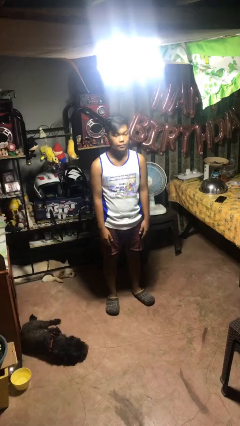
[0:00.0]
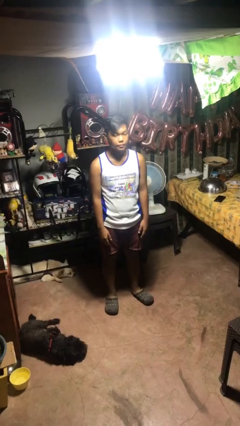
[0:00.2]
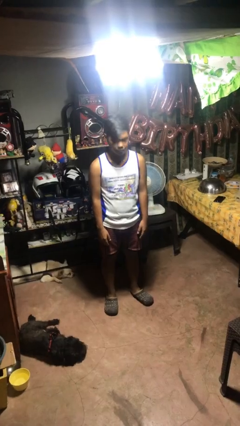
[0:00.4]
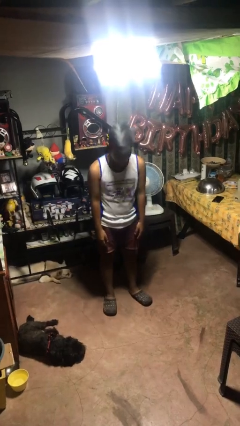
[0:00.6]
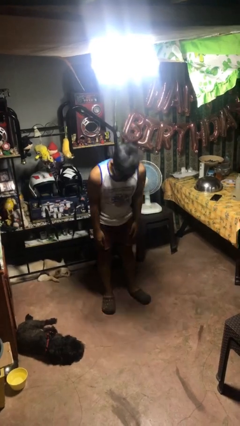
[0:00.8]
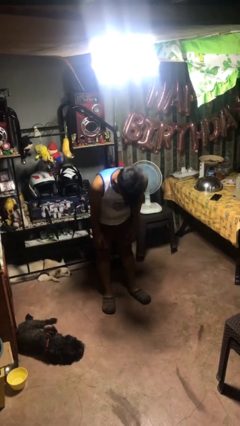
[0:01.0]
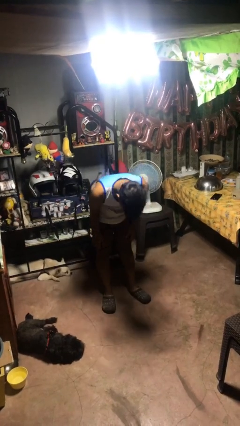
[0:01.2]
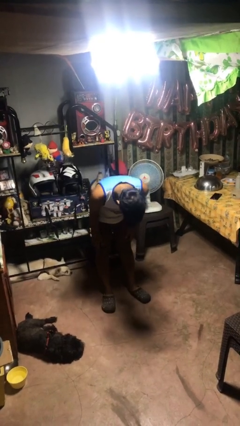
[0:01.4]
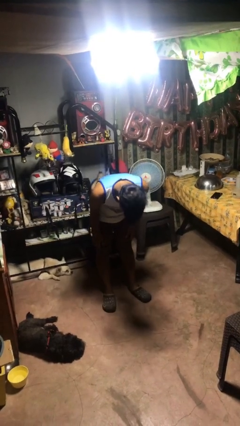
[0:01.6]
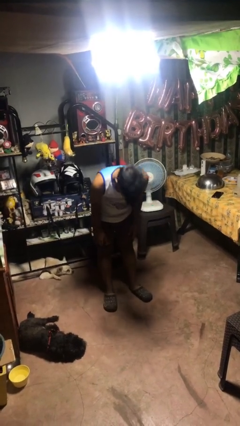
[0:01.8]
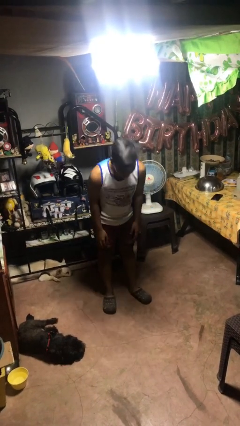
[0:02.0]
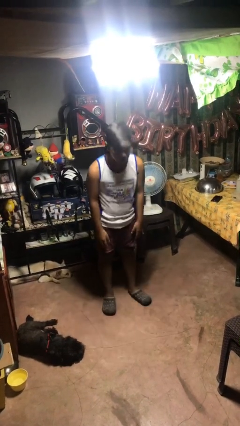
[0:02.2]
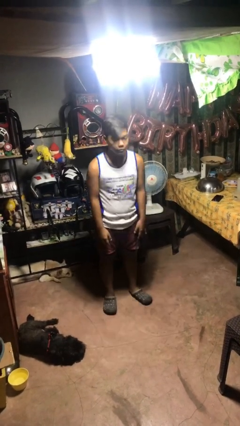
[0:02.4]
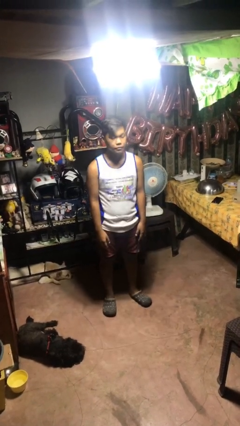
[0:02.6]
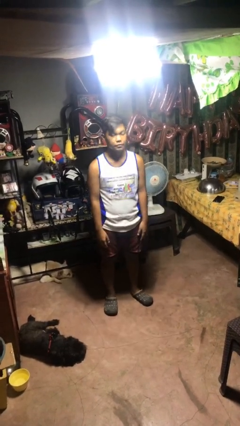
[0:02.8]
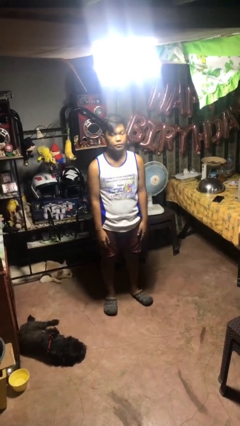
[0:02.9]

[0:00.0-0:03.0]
person bows

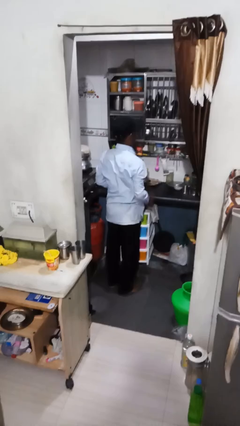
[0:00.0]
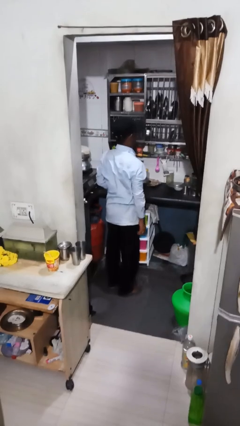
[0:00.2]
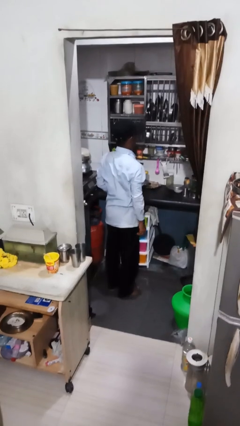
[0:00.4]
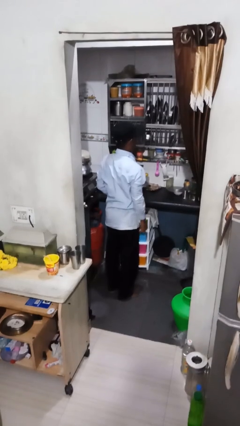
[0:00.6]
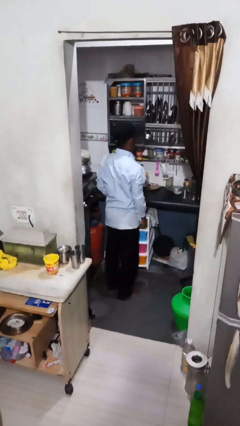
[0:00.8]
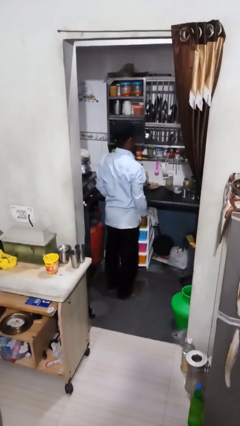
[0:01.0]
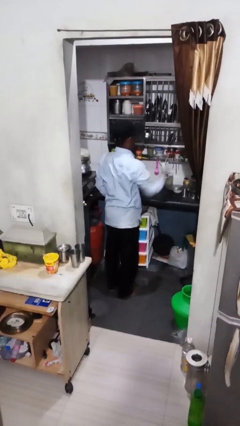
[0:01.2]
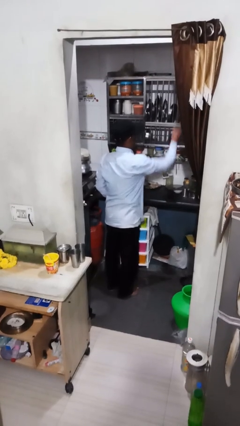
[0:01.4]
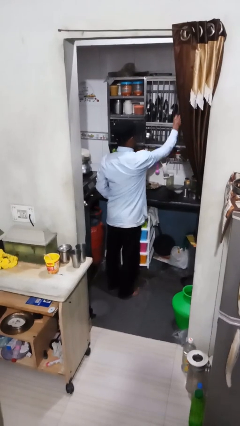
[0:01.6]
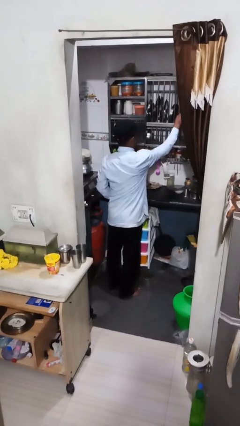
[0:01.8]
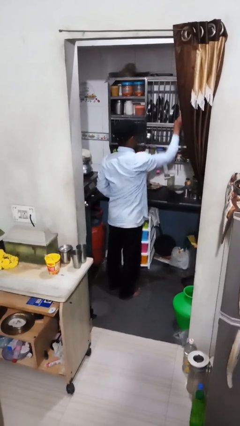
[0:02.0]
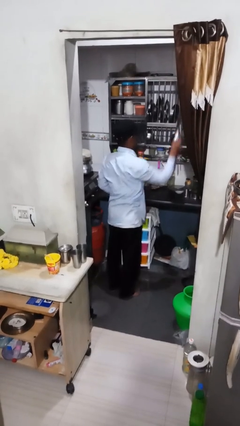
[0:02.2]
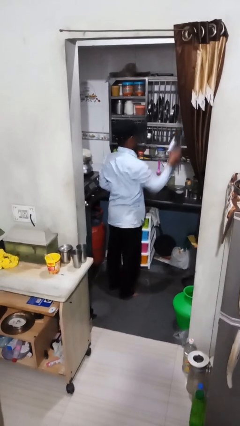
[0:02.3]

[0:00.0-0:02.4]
person takes object from cabinet

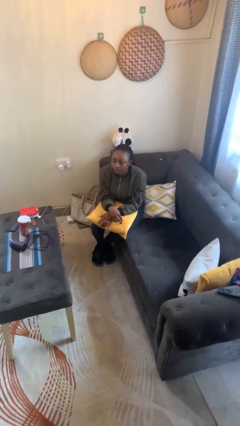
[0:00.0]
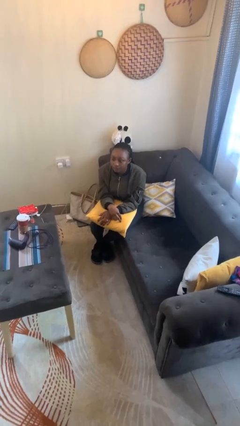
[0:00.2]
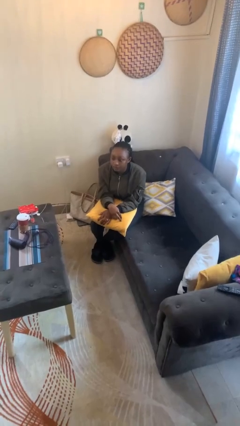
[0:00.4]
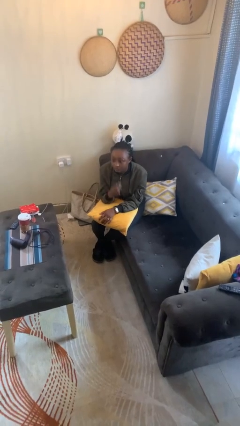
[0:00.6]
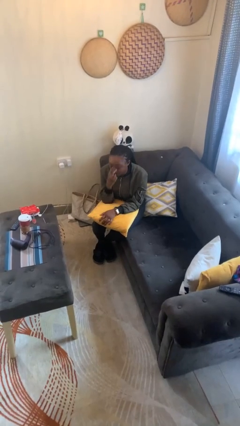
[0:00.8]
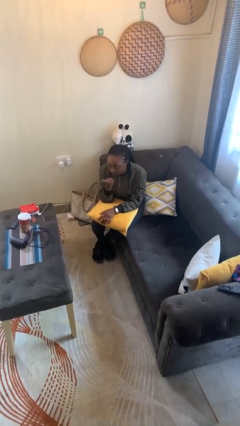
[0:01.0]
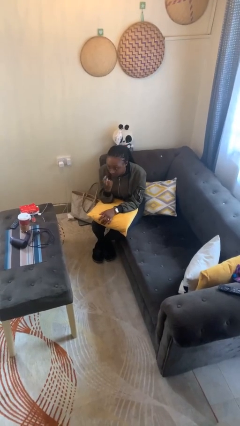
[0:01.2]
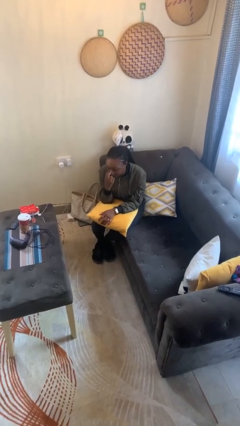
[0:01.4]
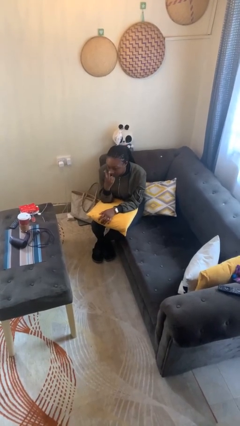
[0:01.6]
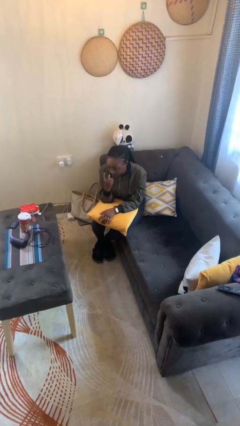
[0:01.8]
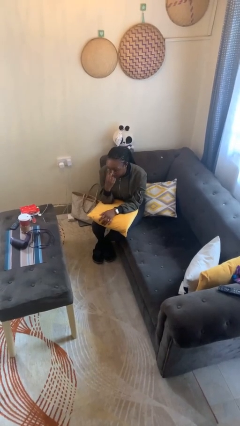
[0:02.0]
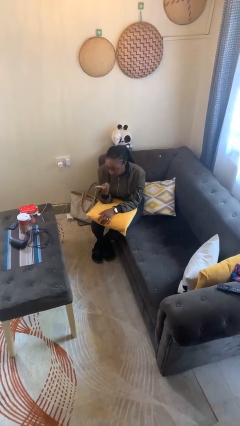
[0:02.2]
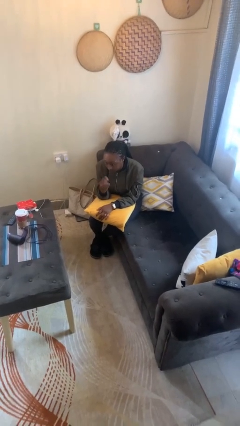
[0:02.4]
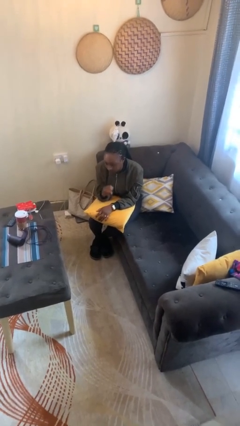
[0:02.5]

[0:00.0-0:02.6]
person gestures watch closely

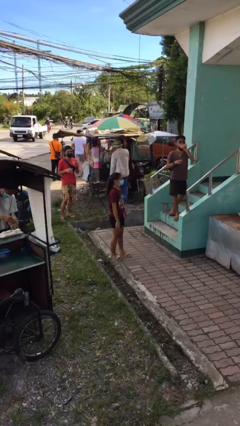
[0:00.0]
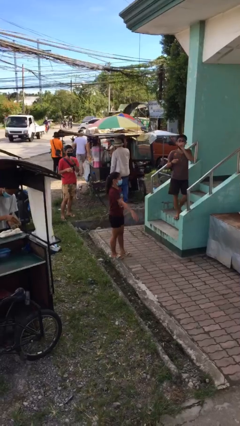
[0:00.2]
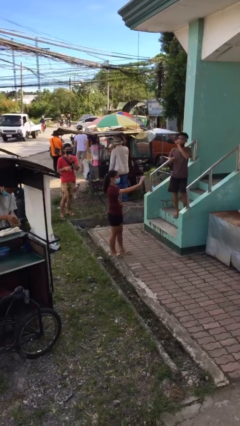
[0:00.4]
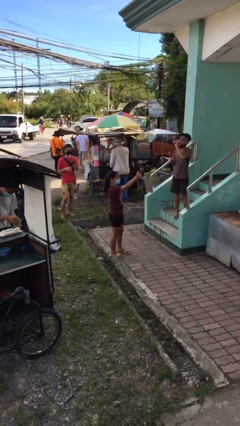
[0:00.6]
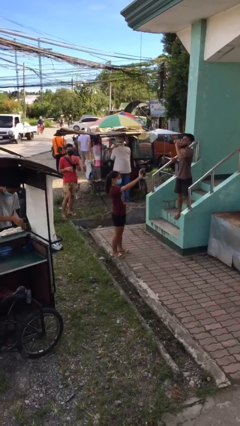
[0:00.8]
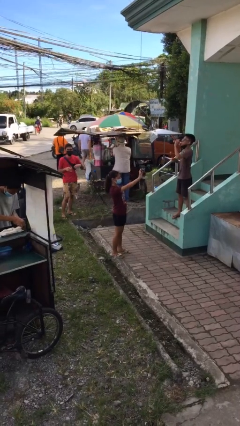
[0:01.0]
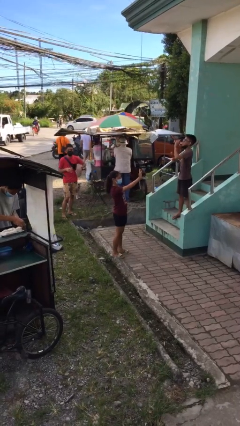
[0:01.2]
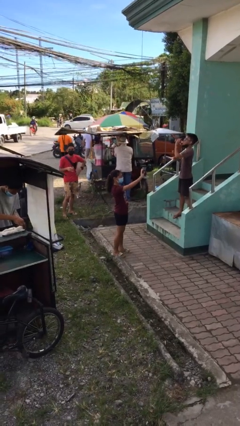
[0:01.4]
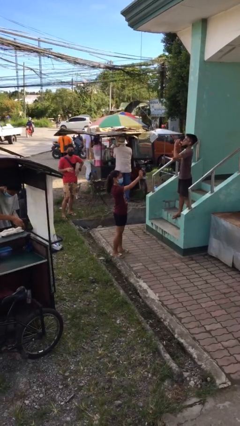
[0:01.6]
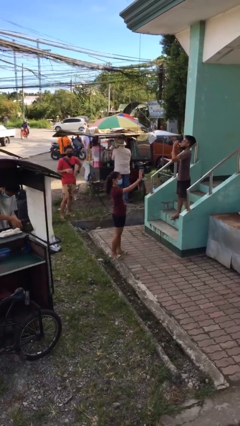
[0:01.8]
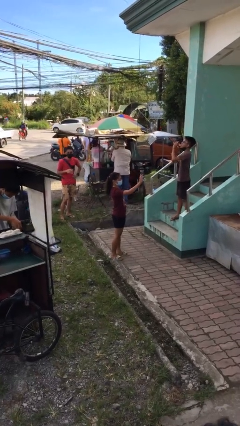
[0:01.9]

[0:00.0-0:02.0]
person waves at person

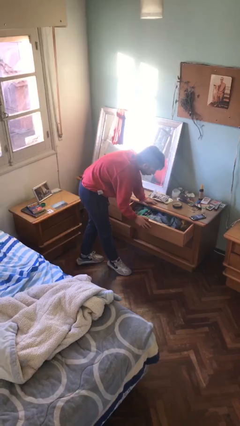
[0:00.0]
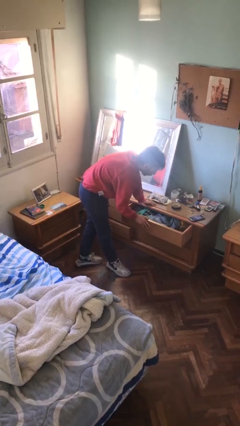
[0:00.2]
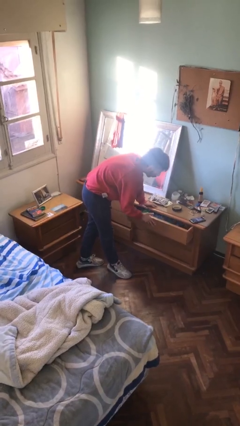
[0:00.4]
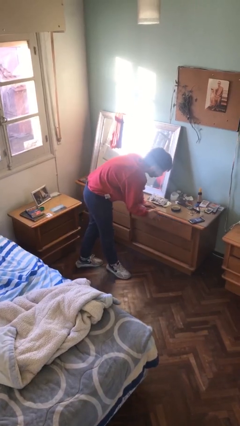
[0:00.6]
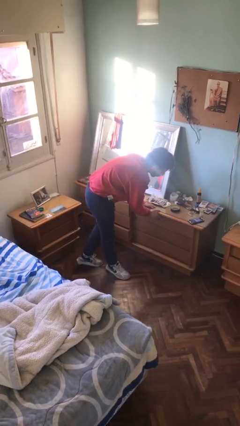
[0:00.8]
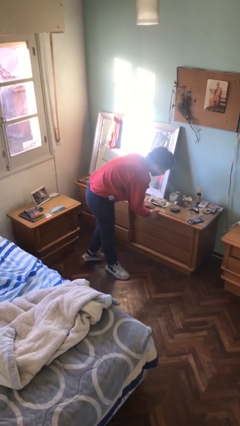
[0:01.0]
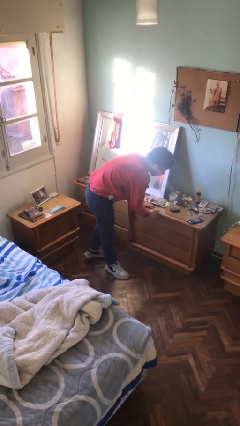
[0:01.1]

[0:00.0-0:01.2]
person closes dresser drawer

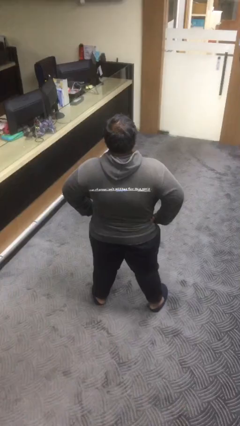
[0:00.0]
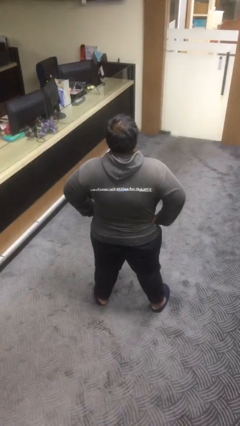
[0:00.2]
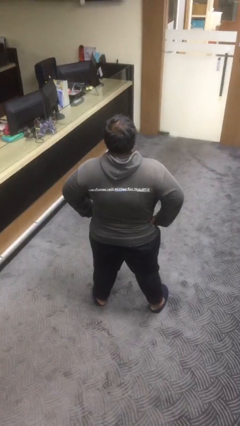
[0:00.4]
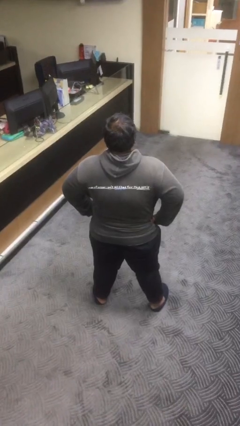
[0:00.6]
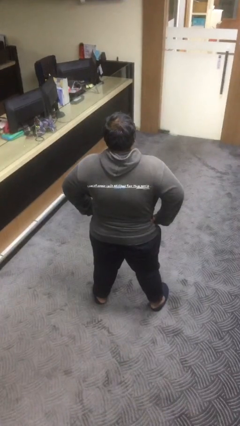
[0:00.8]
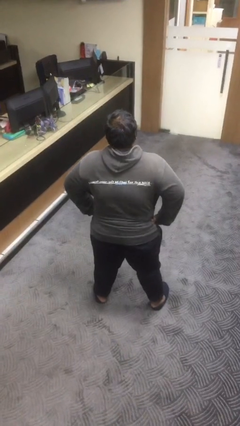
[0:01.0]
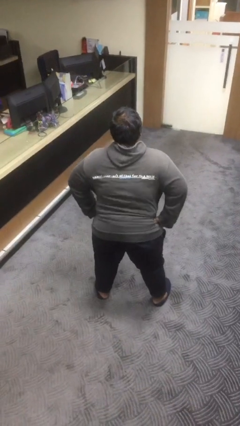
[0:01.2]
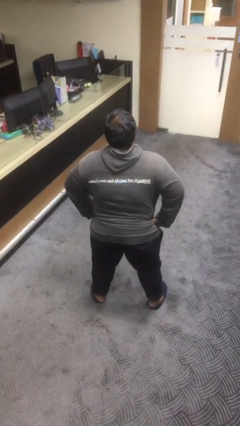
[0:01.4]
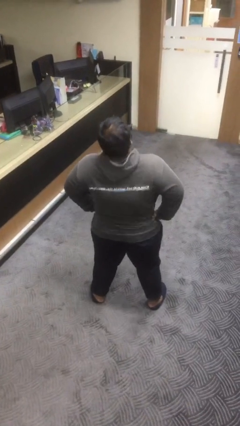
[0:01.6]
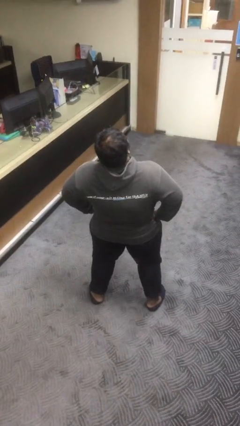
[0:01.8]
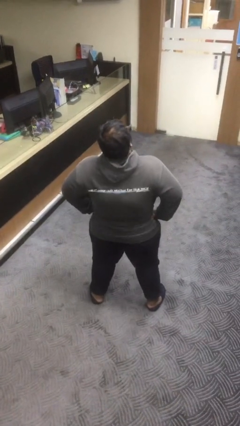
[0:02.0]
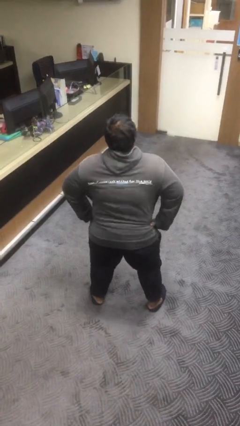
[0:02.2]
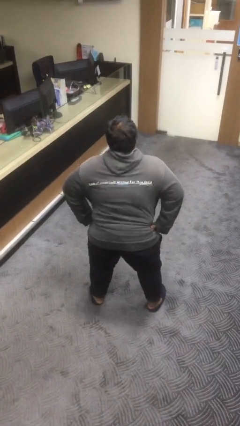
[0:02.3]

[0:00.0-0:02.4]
person wiggles hips

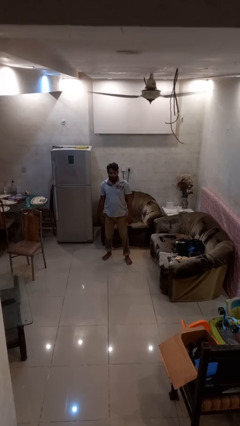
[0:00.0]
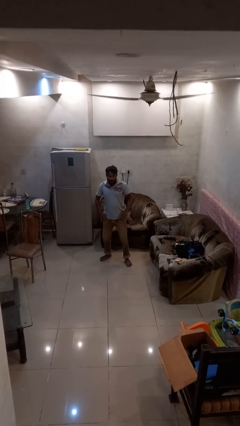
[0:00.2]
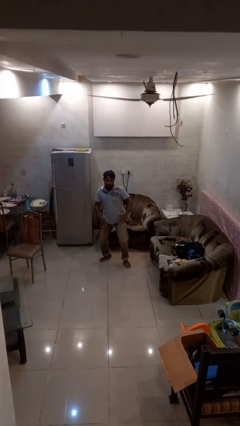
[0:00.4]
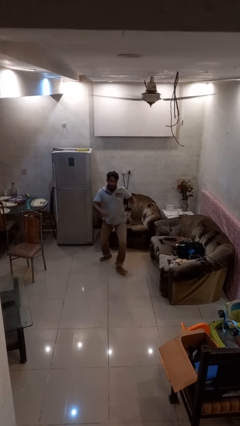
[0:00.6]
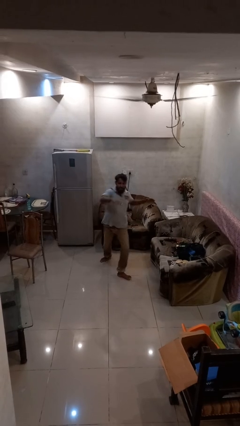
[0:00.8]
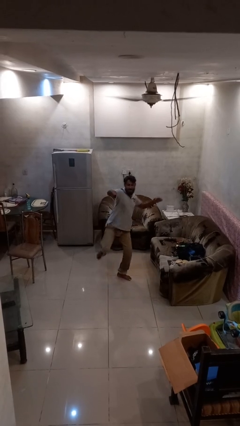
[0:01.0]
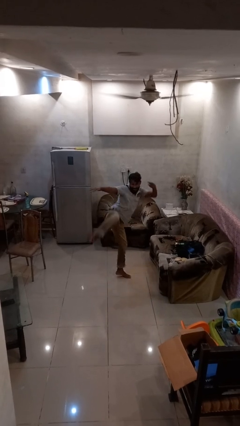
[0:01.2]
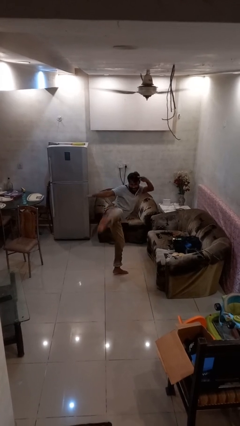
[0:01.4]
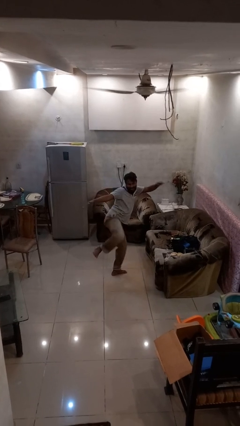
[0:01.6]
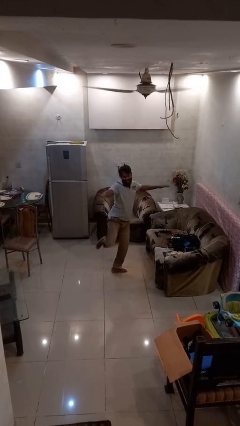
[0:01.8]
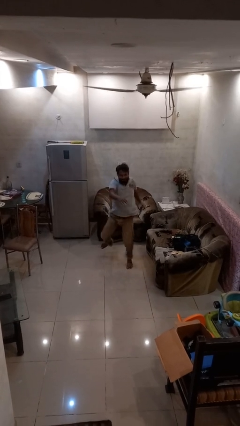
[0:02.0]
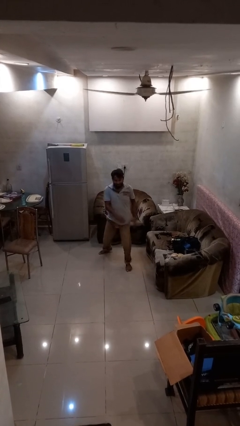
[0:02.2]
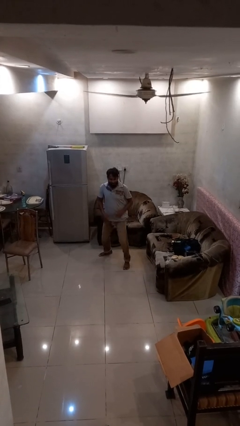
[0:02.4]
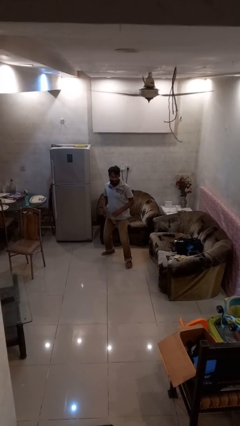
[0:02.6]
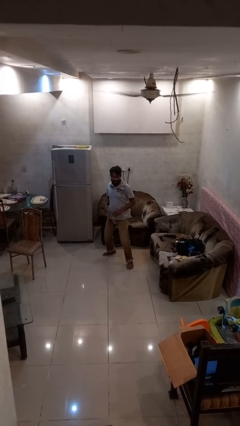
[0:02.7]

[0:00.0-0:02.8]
person karate kicks

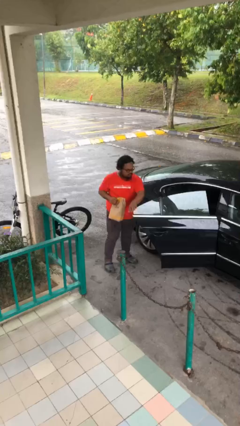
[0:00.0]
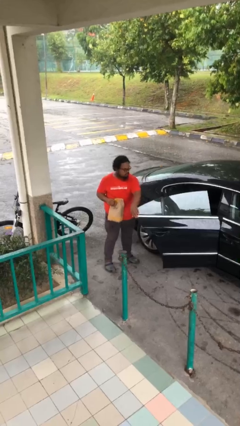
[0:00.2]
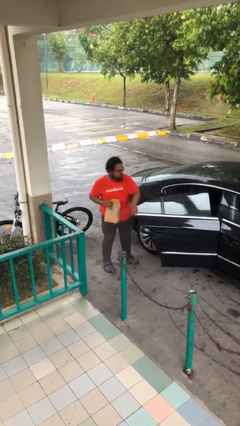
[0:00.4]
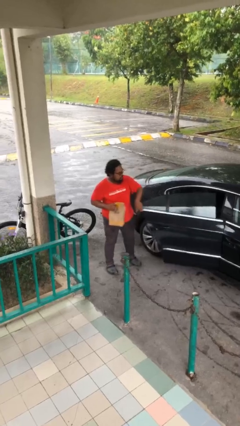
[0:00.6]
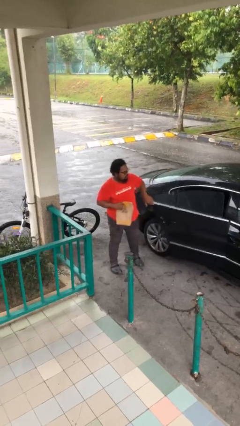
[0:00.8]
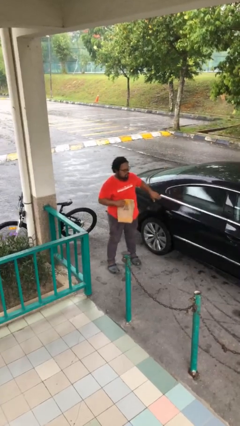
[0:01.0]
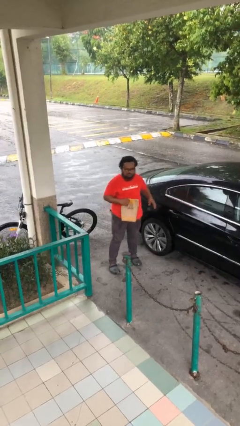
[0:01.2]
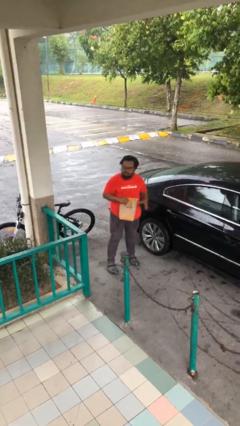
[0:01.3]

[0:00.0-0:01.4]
person closes car door
